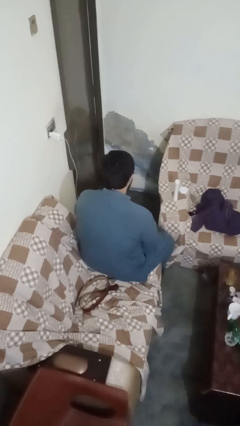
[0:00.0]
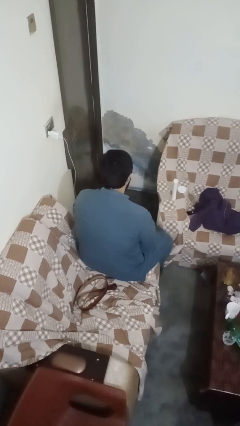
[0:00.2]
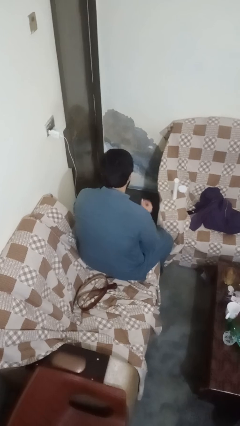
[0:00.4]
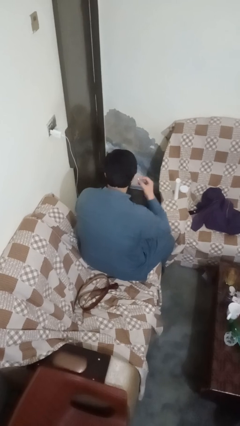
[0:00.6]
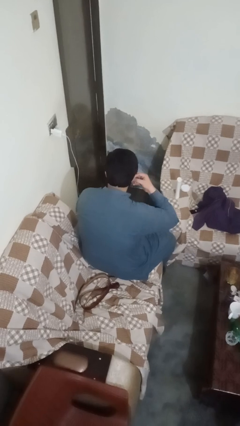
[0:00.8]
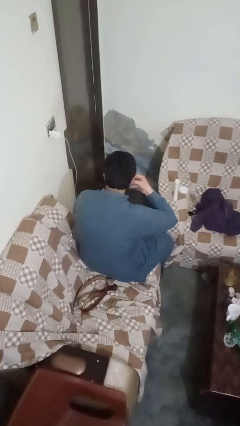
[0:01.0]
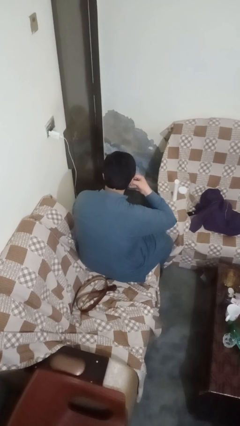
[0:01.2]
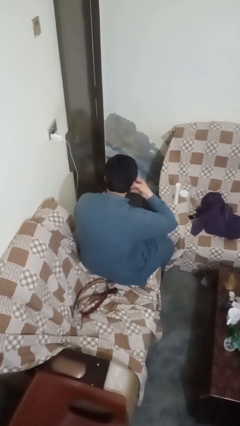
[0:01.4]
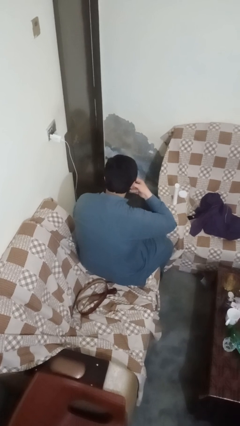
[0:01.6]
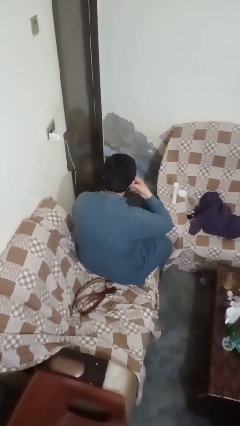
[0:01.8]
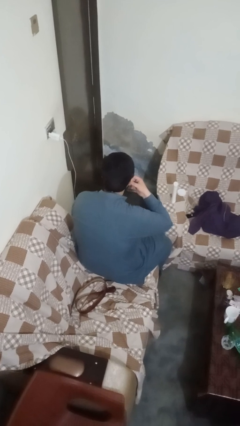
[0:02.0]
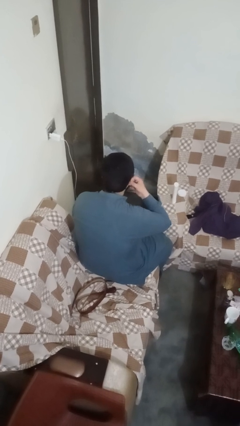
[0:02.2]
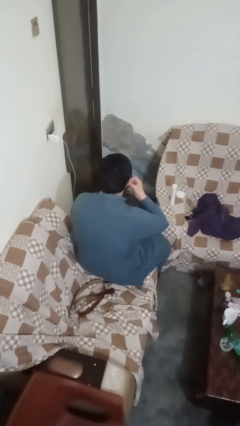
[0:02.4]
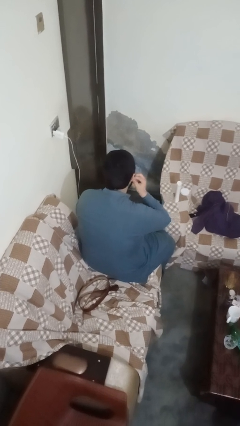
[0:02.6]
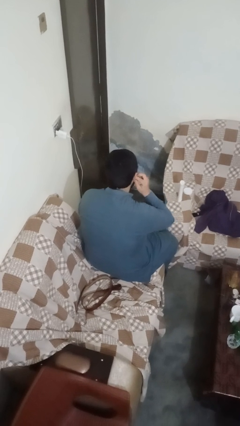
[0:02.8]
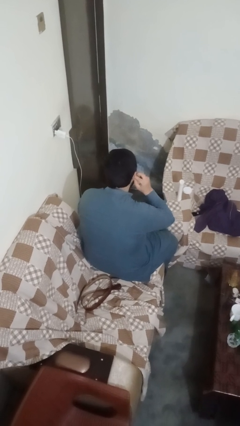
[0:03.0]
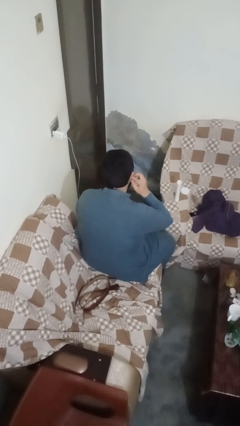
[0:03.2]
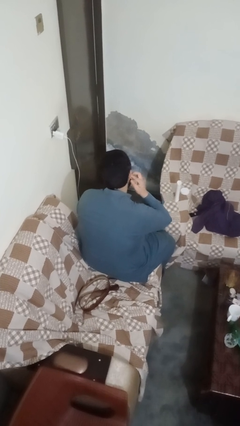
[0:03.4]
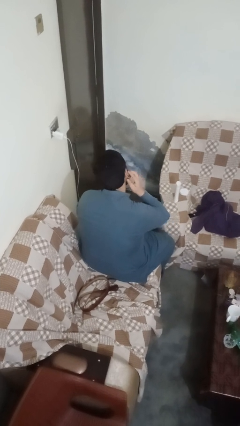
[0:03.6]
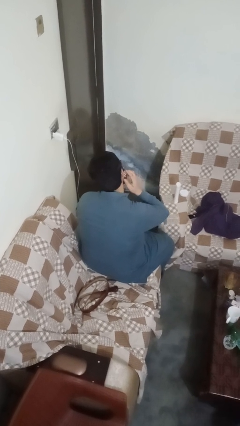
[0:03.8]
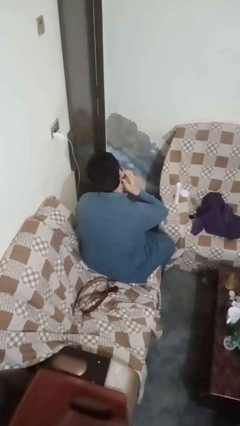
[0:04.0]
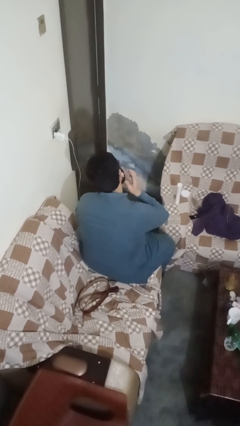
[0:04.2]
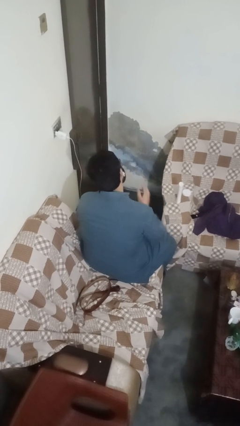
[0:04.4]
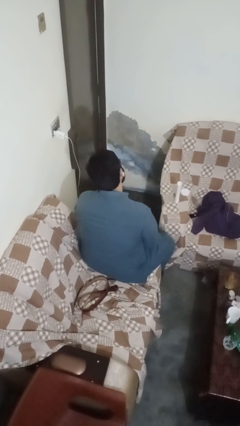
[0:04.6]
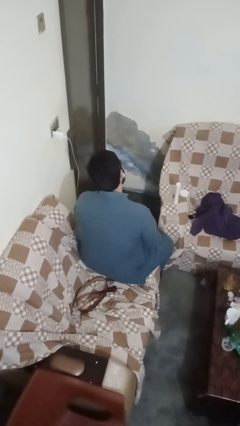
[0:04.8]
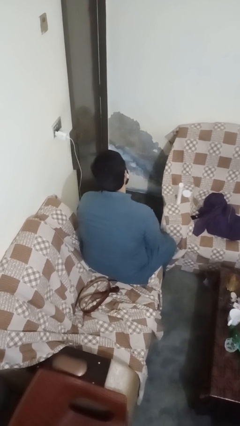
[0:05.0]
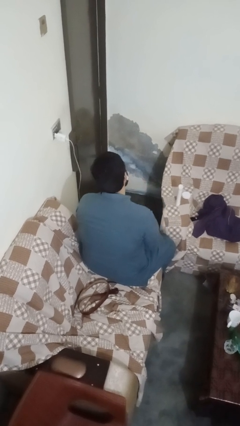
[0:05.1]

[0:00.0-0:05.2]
person puts on earrings

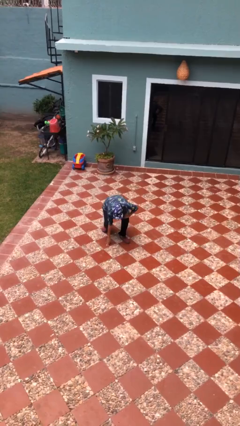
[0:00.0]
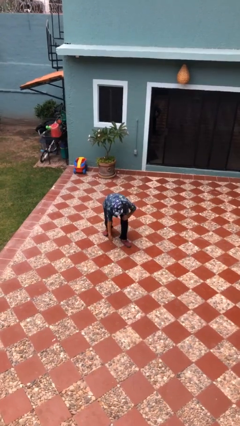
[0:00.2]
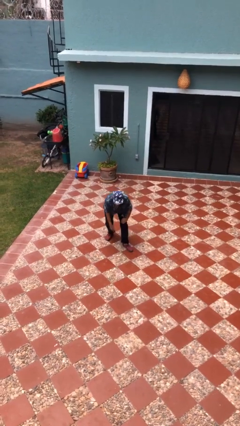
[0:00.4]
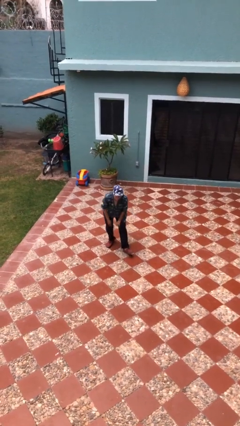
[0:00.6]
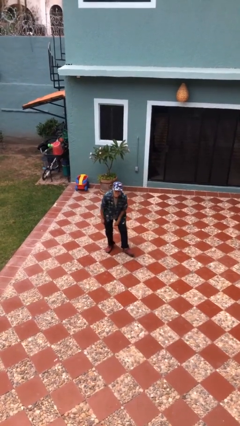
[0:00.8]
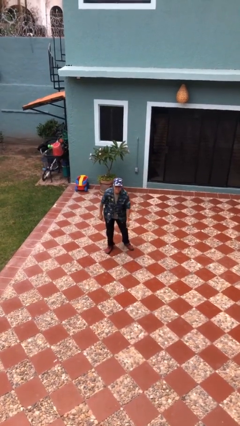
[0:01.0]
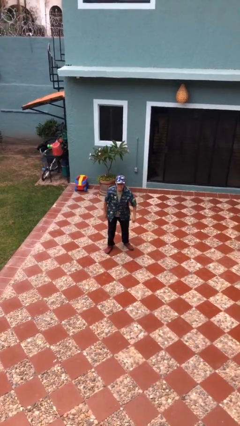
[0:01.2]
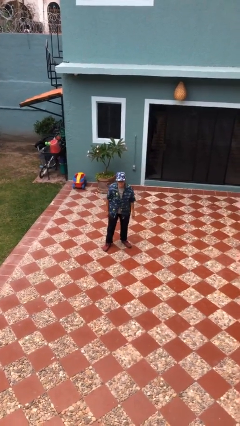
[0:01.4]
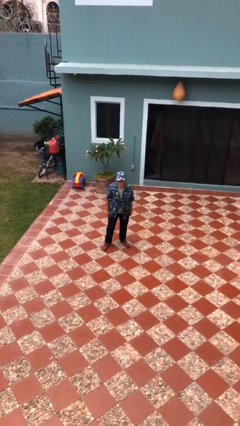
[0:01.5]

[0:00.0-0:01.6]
person stands up from floor

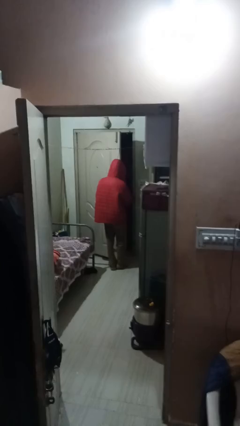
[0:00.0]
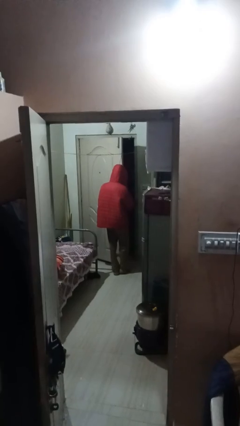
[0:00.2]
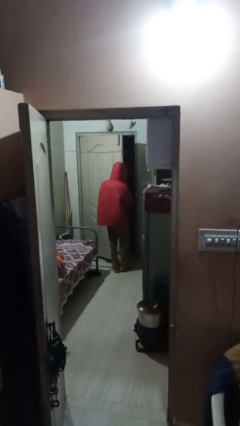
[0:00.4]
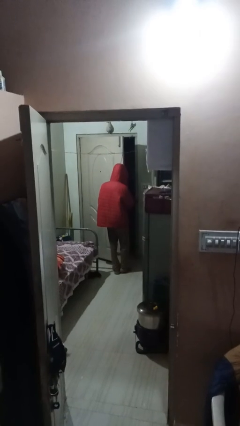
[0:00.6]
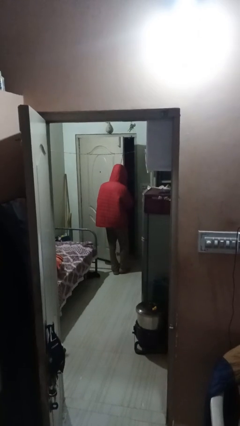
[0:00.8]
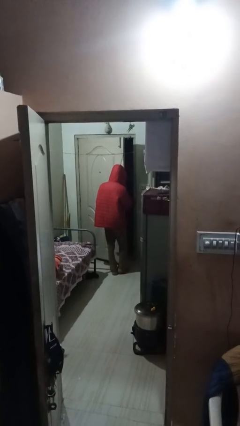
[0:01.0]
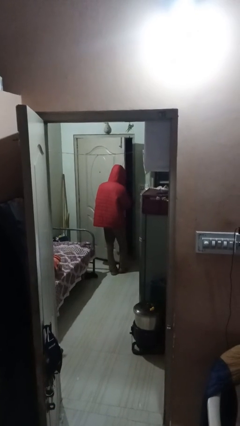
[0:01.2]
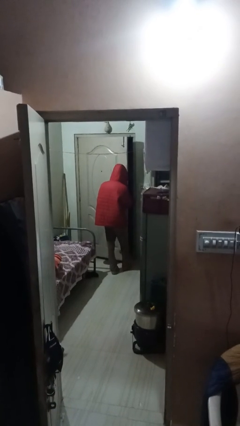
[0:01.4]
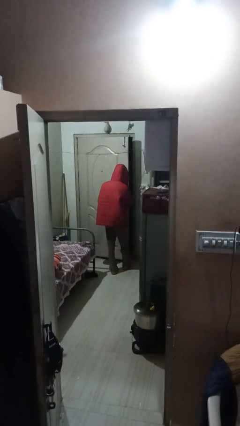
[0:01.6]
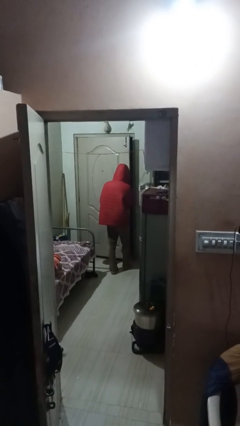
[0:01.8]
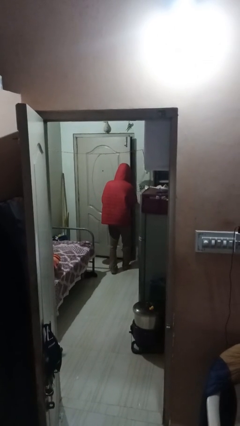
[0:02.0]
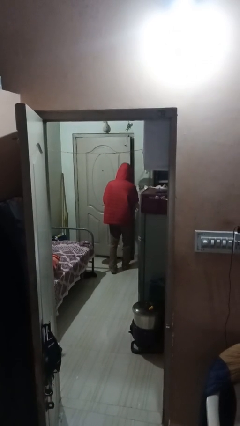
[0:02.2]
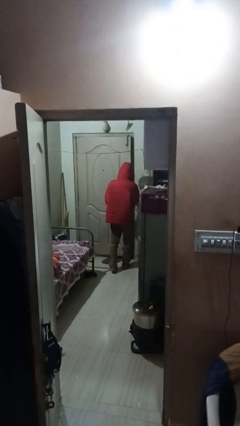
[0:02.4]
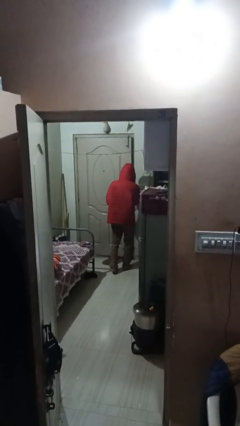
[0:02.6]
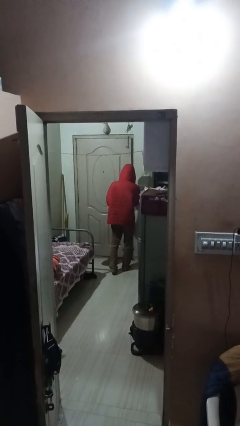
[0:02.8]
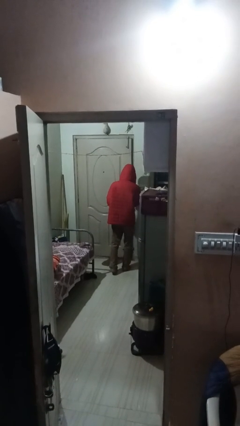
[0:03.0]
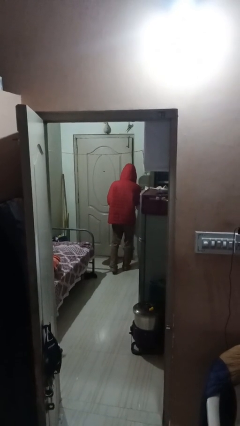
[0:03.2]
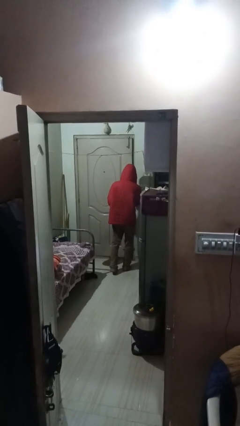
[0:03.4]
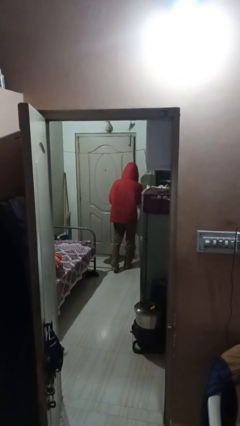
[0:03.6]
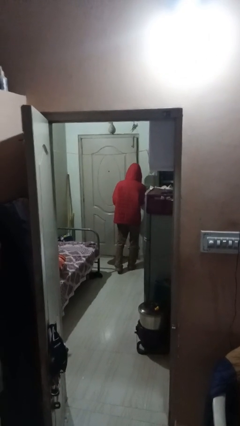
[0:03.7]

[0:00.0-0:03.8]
person closes facility door

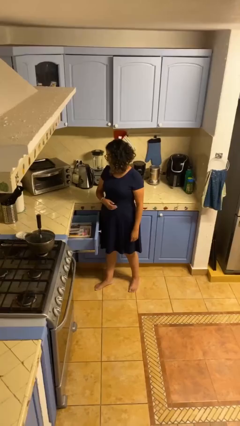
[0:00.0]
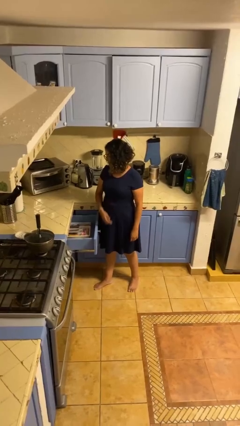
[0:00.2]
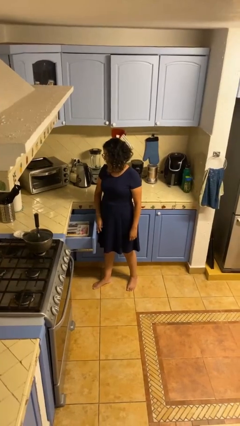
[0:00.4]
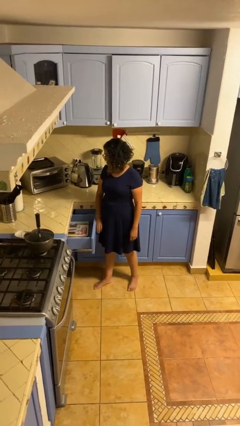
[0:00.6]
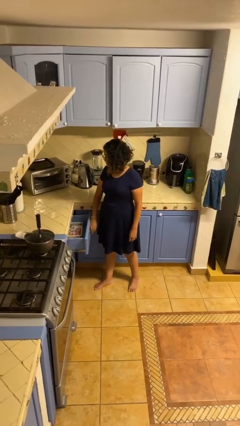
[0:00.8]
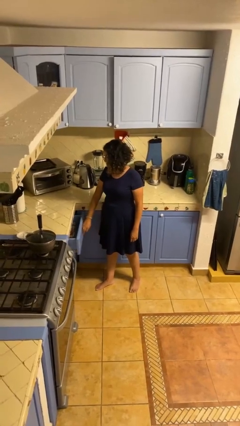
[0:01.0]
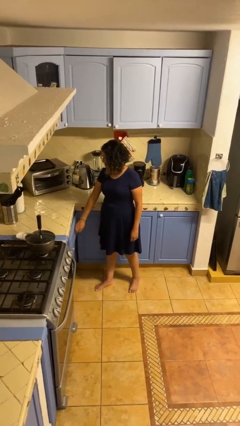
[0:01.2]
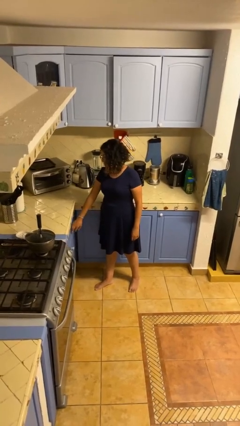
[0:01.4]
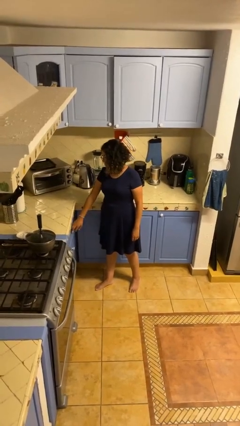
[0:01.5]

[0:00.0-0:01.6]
person closes kitchen drawer

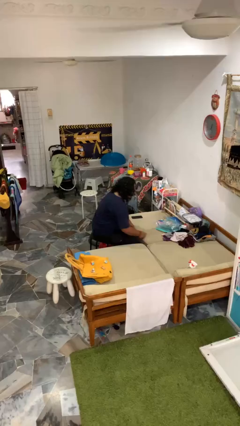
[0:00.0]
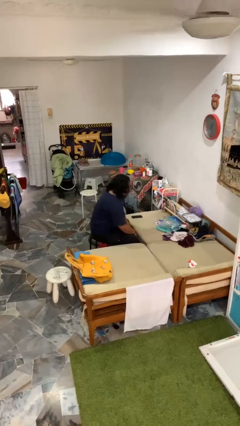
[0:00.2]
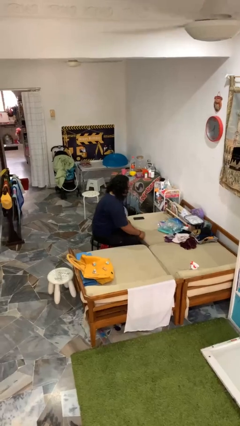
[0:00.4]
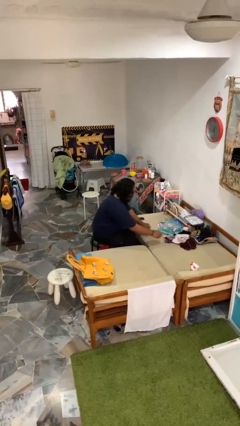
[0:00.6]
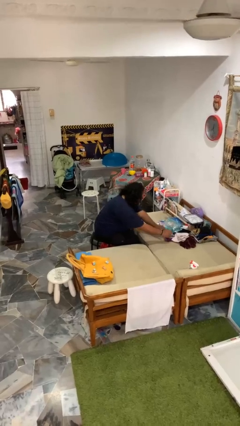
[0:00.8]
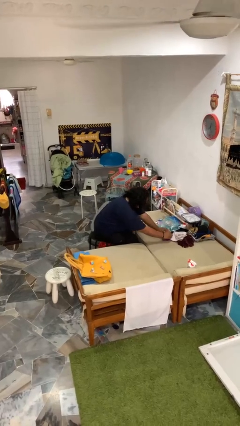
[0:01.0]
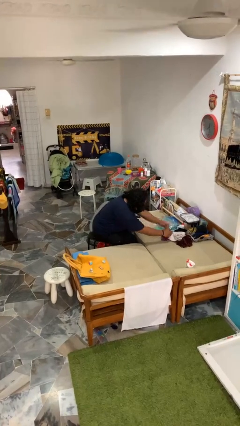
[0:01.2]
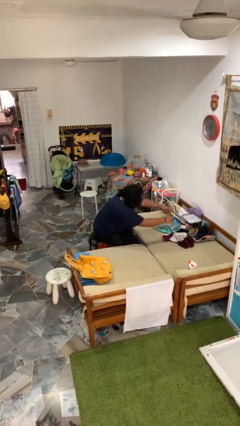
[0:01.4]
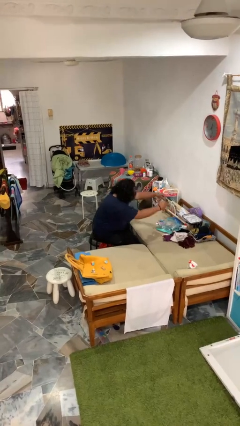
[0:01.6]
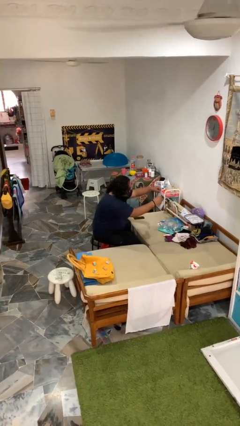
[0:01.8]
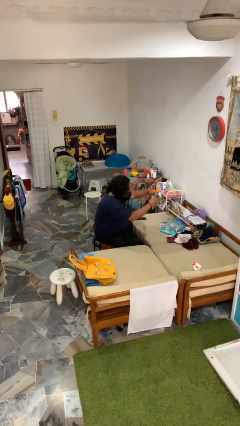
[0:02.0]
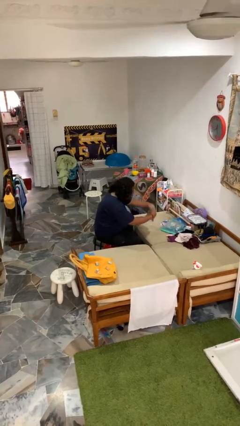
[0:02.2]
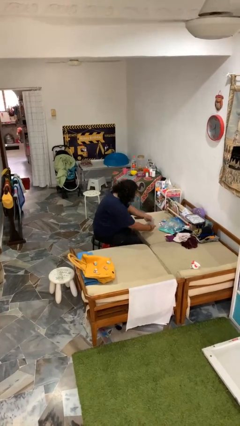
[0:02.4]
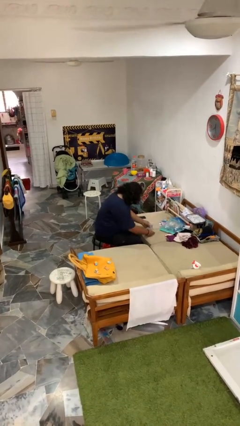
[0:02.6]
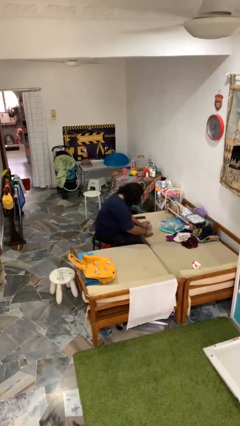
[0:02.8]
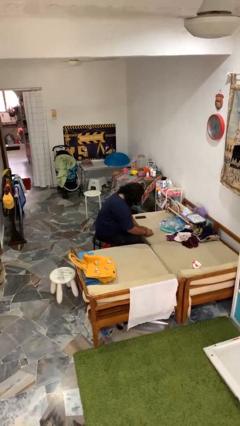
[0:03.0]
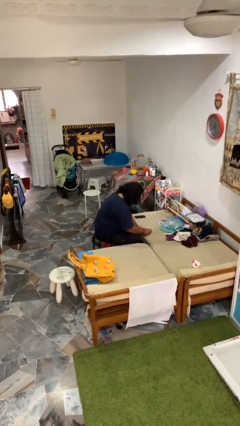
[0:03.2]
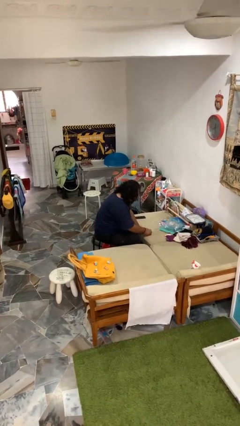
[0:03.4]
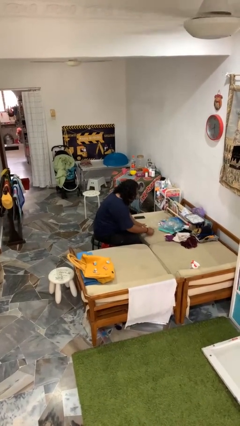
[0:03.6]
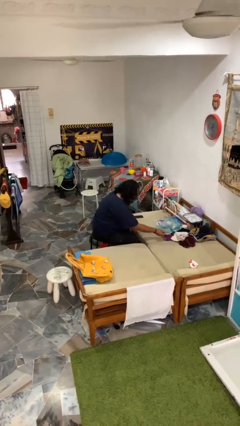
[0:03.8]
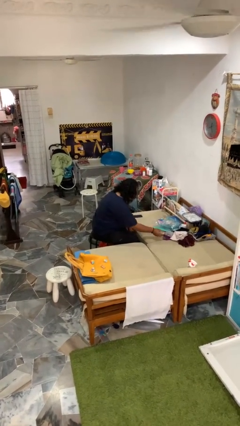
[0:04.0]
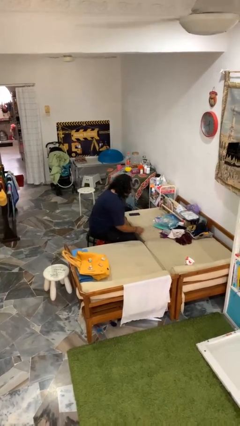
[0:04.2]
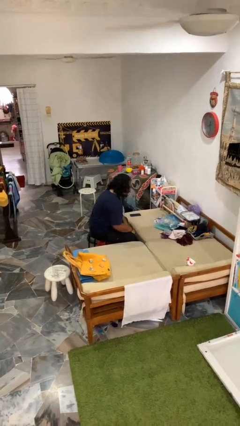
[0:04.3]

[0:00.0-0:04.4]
person folds socks

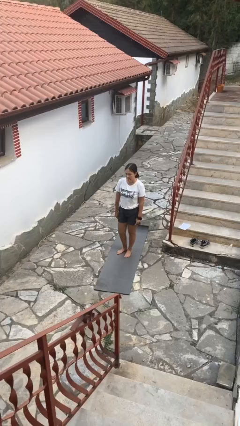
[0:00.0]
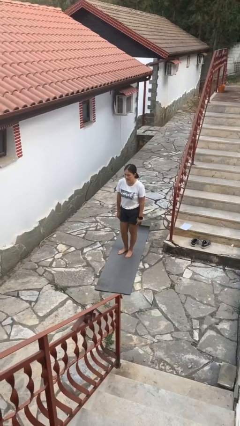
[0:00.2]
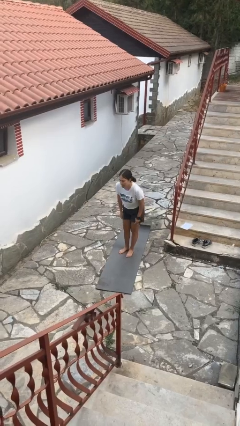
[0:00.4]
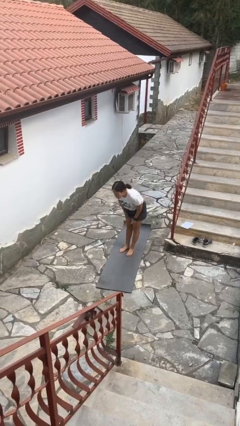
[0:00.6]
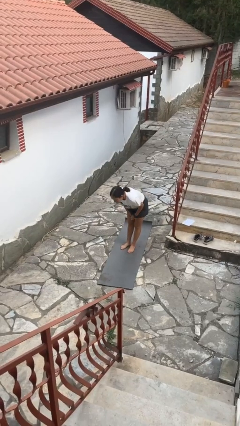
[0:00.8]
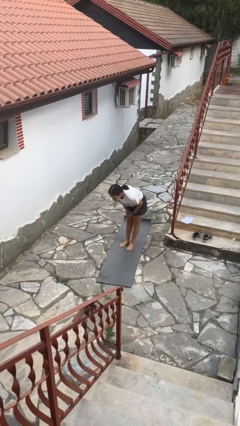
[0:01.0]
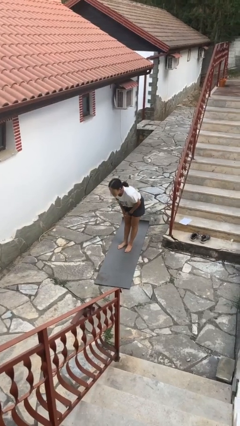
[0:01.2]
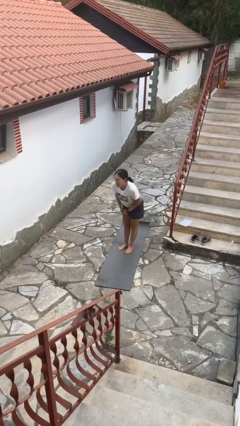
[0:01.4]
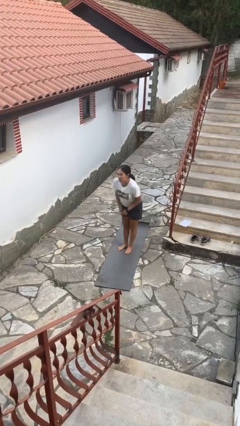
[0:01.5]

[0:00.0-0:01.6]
person bows
